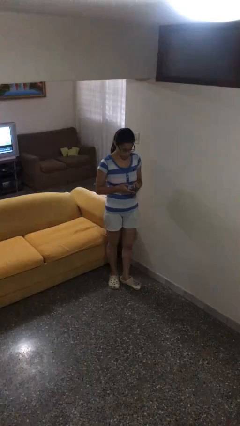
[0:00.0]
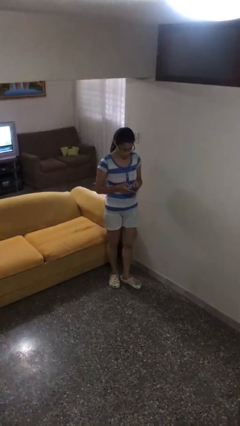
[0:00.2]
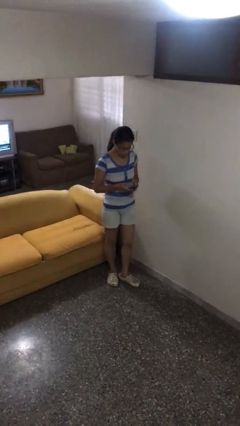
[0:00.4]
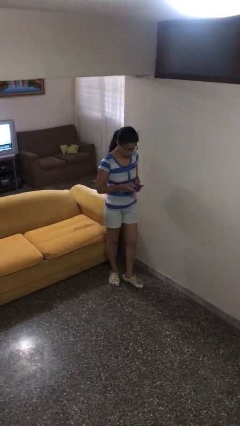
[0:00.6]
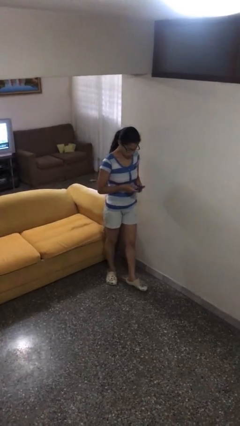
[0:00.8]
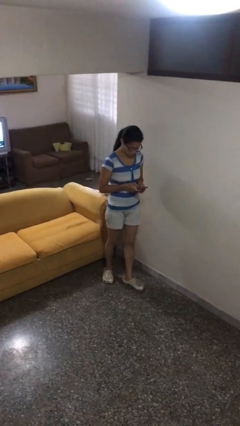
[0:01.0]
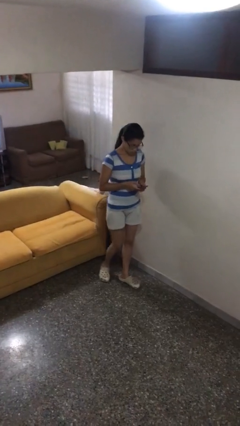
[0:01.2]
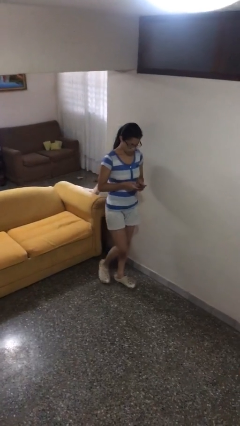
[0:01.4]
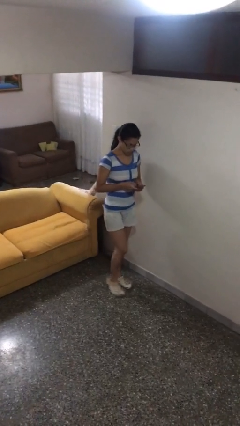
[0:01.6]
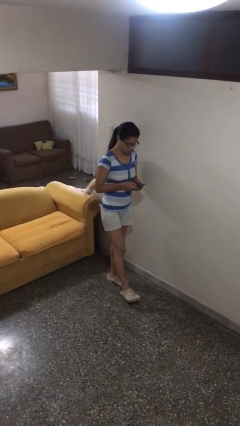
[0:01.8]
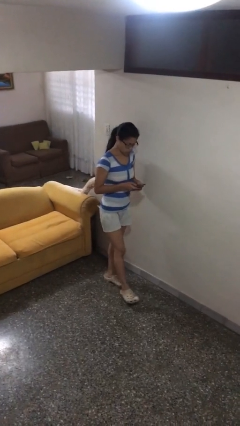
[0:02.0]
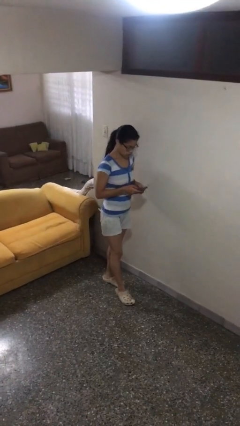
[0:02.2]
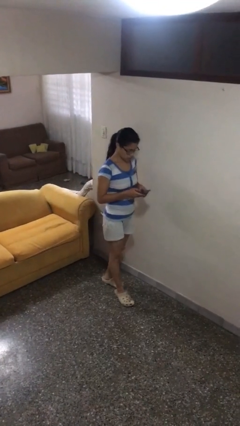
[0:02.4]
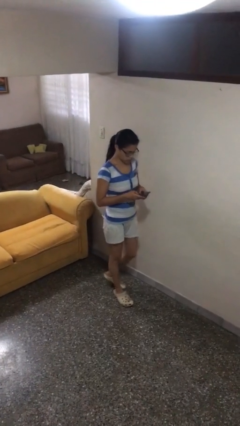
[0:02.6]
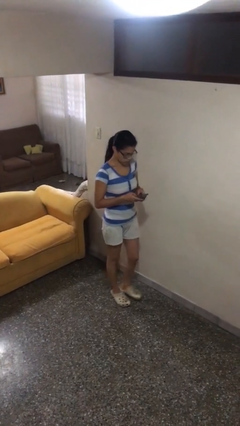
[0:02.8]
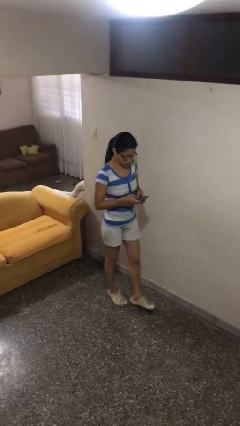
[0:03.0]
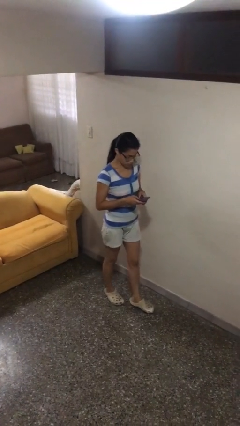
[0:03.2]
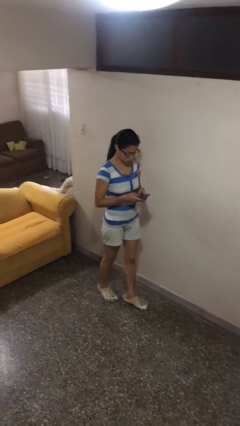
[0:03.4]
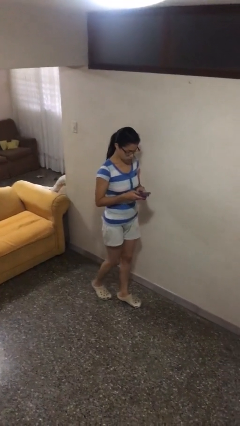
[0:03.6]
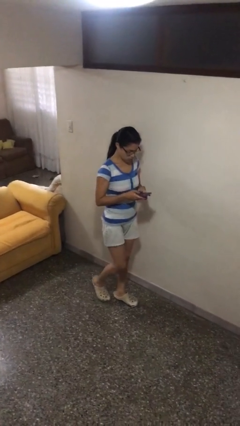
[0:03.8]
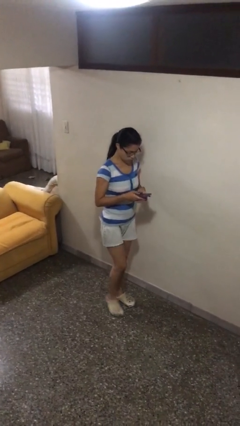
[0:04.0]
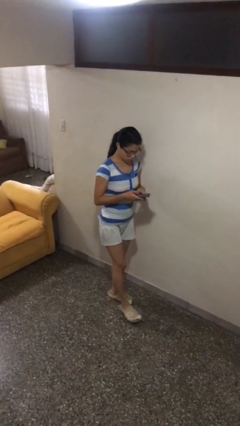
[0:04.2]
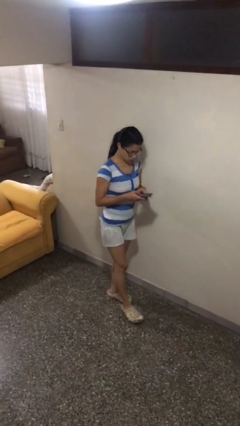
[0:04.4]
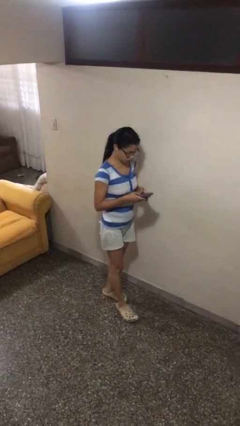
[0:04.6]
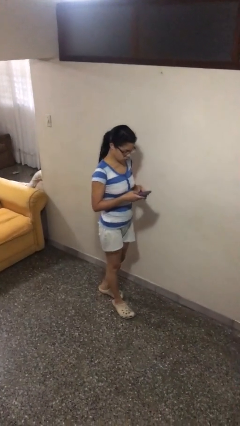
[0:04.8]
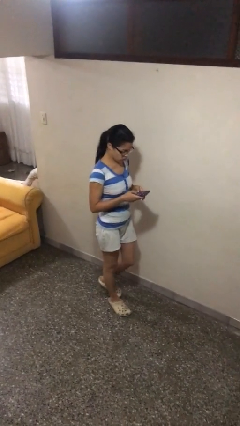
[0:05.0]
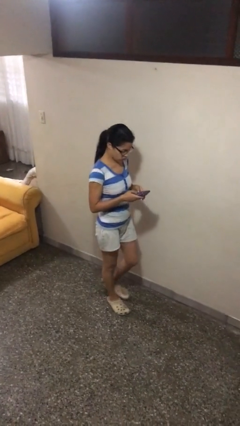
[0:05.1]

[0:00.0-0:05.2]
person texts on phone

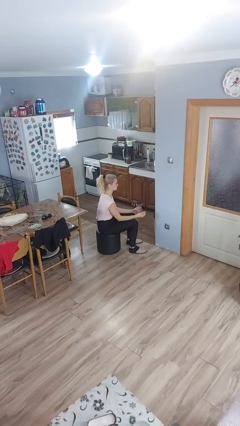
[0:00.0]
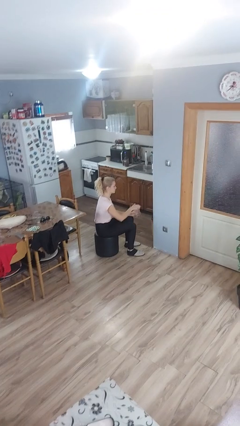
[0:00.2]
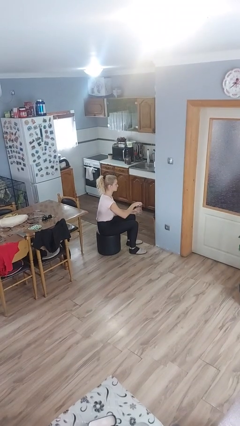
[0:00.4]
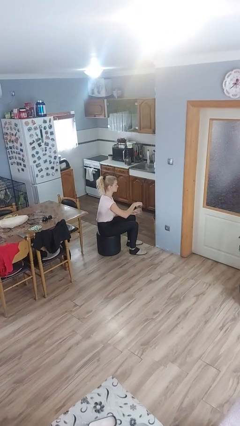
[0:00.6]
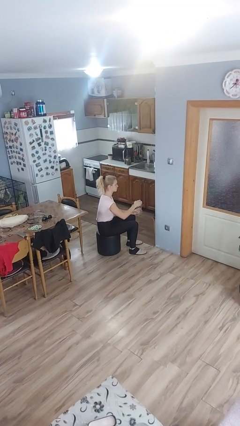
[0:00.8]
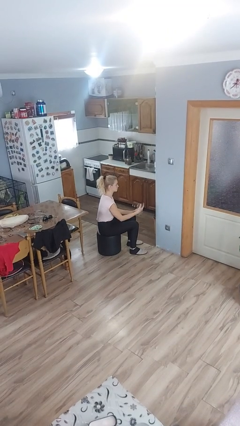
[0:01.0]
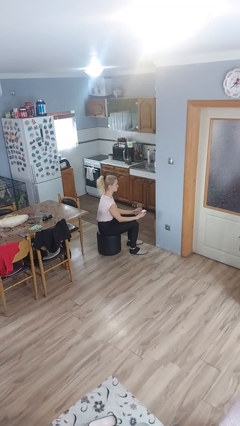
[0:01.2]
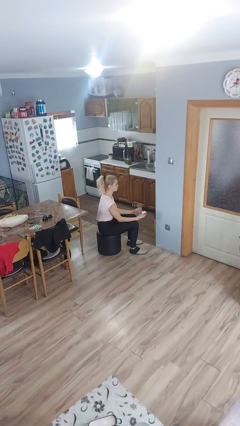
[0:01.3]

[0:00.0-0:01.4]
person opens jar

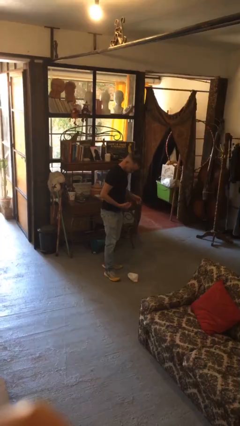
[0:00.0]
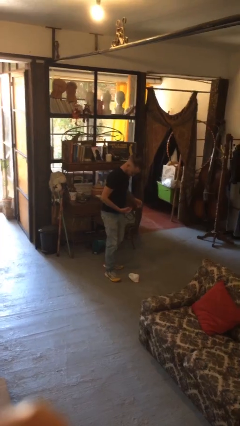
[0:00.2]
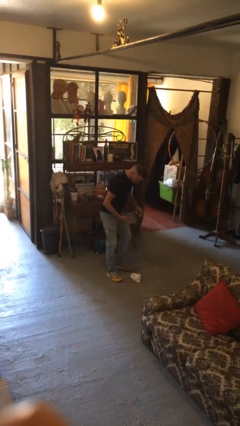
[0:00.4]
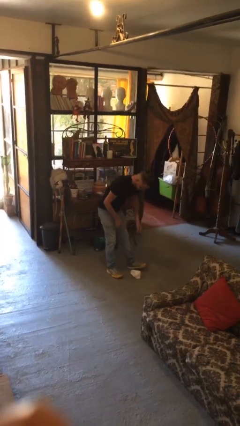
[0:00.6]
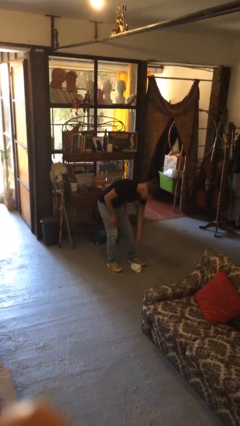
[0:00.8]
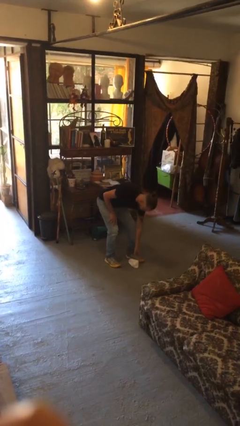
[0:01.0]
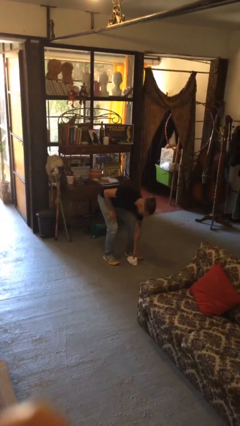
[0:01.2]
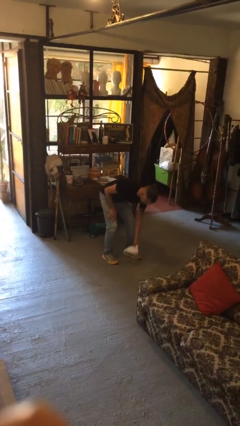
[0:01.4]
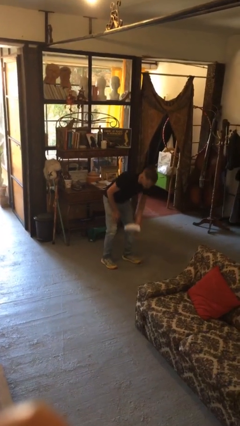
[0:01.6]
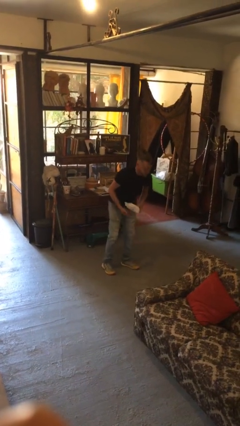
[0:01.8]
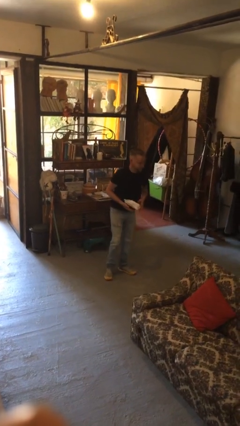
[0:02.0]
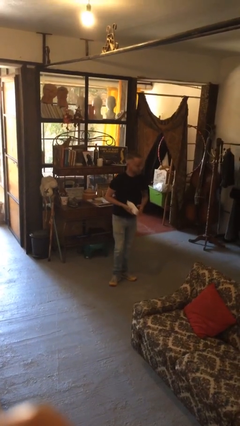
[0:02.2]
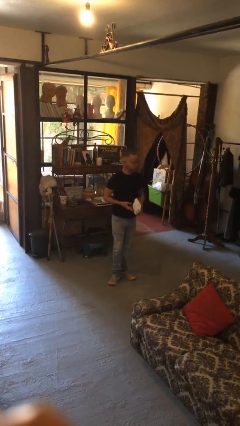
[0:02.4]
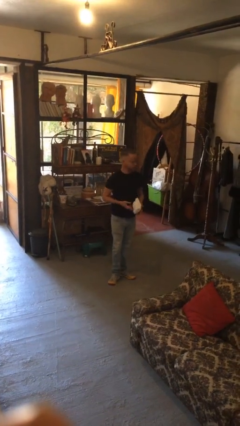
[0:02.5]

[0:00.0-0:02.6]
person picks up object from floor

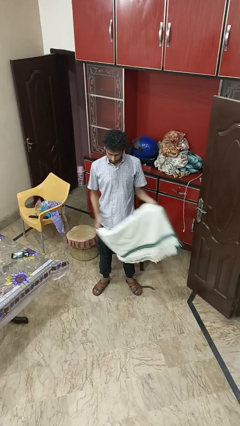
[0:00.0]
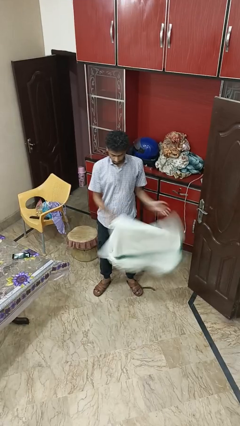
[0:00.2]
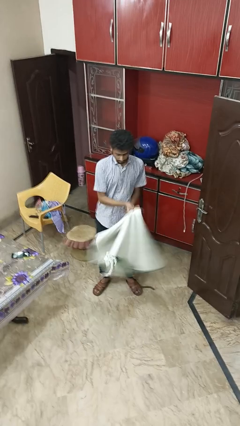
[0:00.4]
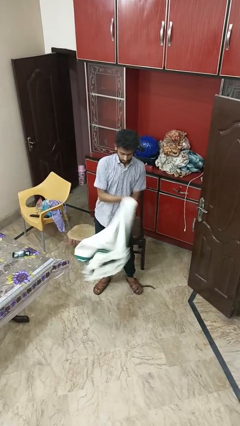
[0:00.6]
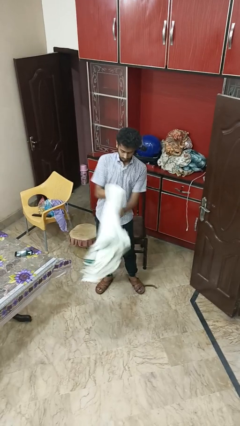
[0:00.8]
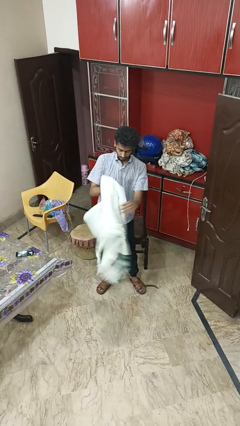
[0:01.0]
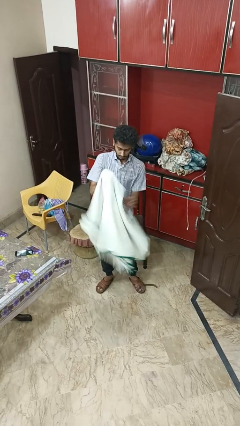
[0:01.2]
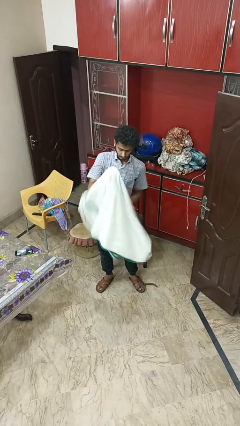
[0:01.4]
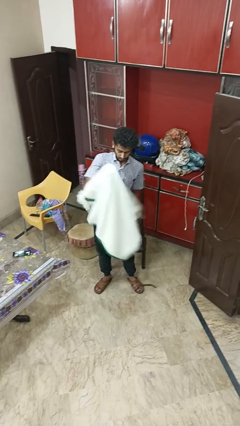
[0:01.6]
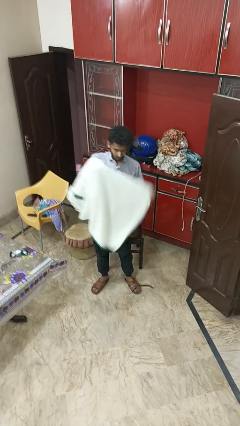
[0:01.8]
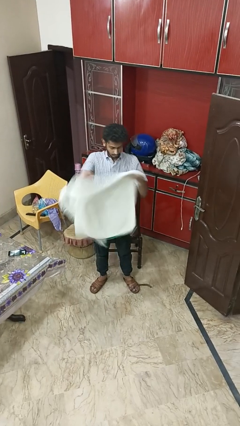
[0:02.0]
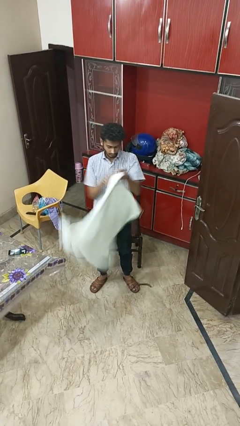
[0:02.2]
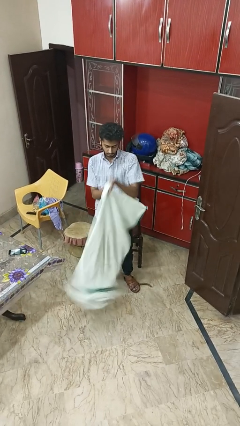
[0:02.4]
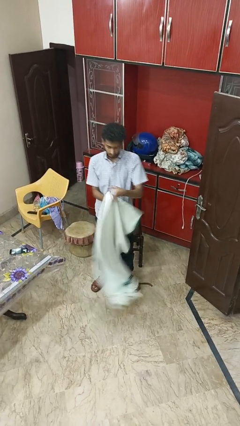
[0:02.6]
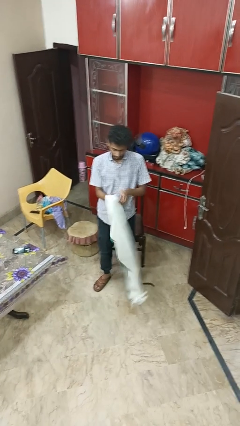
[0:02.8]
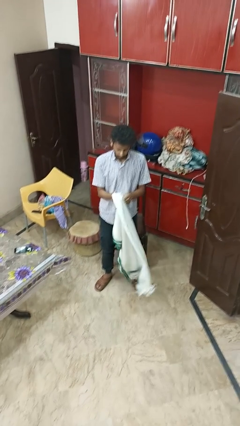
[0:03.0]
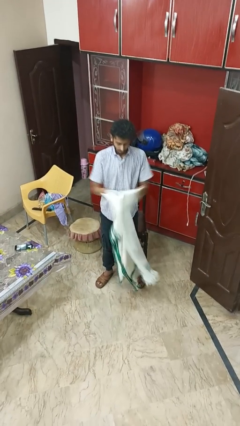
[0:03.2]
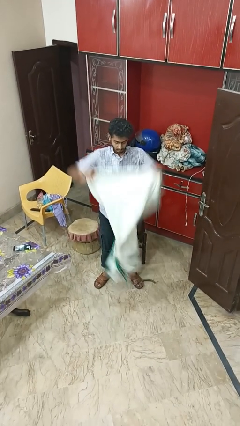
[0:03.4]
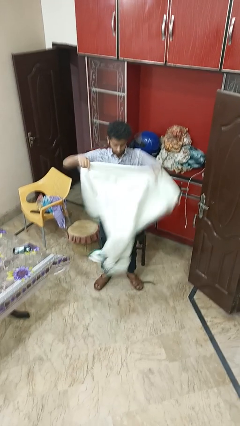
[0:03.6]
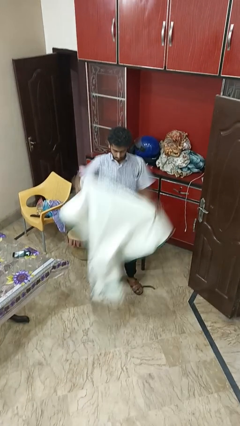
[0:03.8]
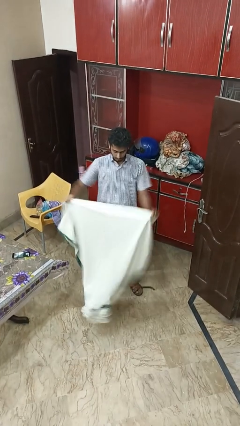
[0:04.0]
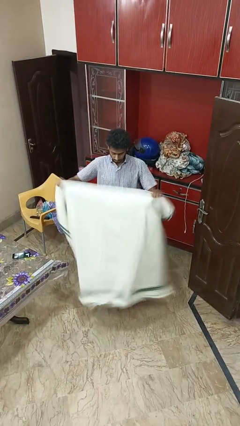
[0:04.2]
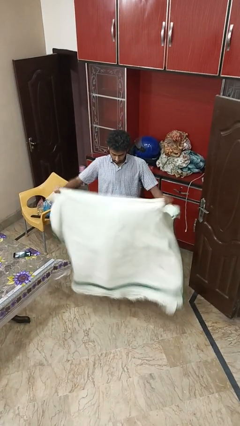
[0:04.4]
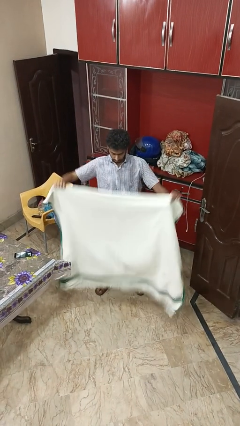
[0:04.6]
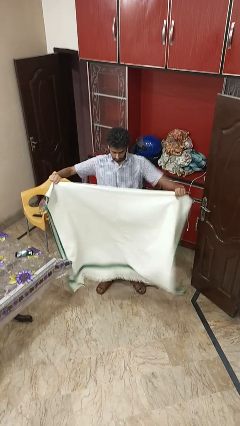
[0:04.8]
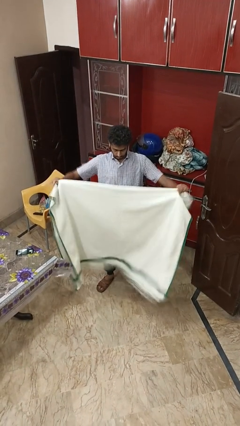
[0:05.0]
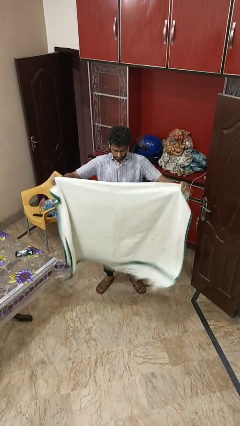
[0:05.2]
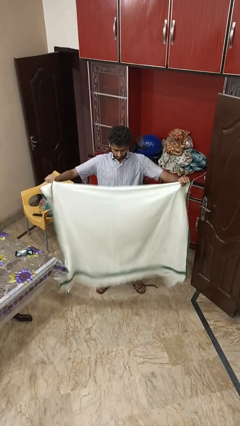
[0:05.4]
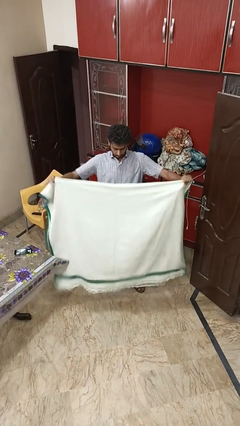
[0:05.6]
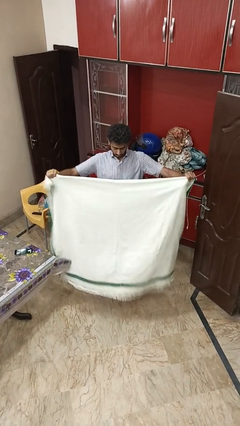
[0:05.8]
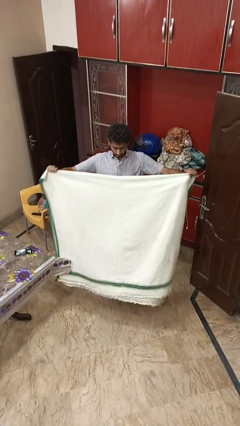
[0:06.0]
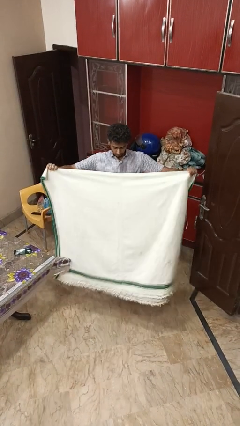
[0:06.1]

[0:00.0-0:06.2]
person unfolds blanket

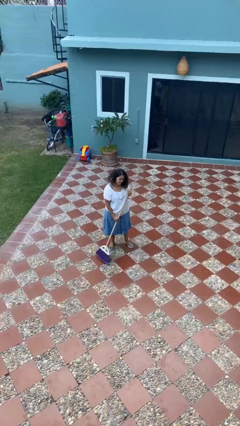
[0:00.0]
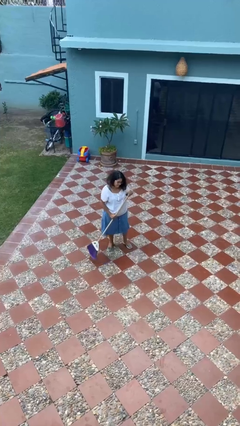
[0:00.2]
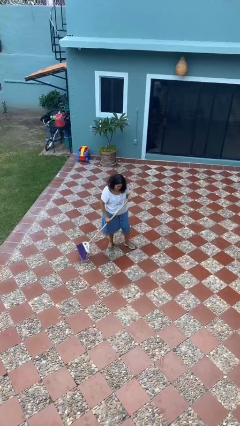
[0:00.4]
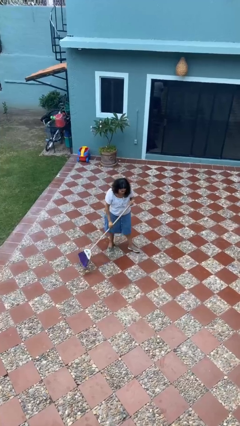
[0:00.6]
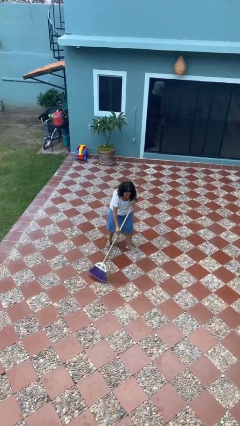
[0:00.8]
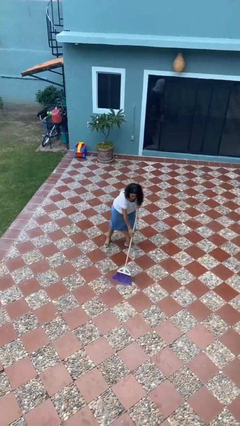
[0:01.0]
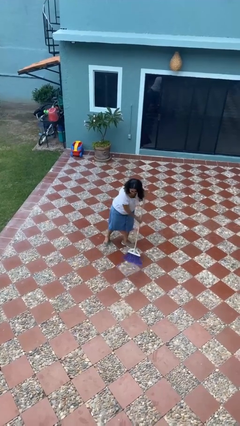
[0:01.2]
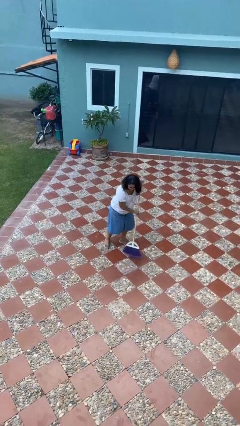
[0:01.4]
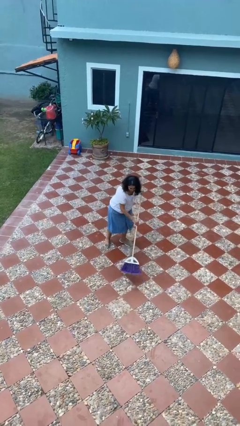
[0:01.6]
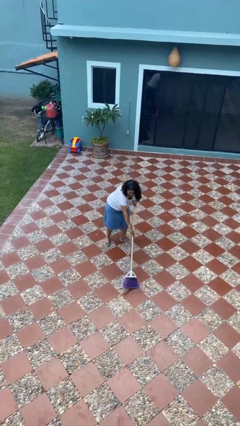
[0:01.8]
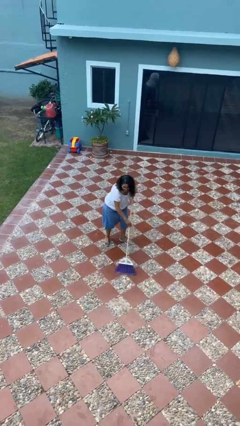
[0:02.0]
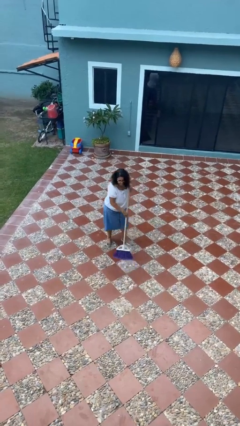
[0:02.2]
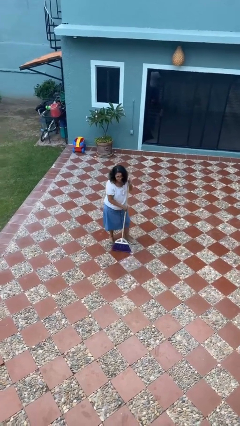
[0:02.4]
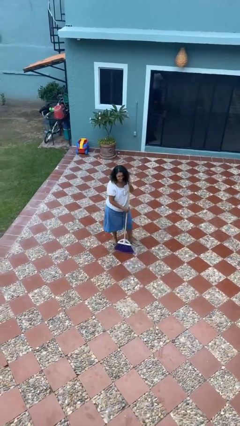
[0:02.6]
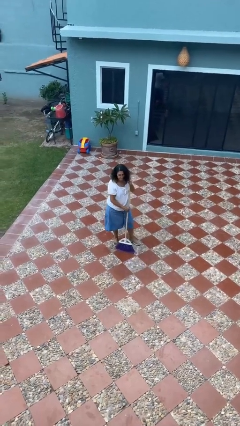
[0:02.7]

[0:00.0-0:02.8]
person sweeps floor
